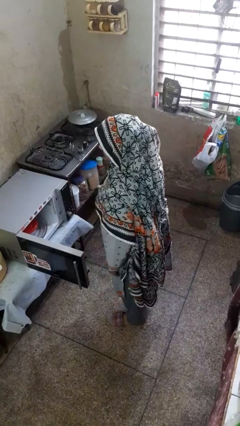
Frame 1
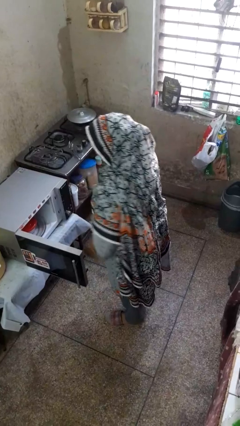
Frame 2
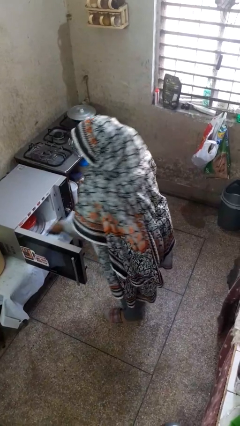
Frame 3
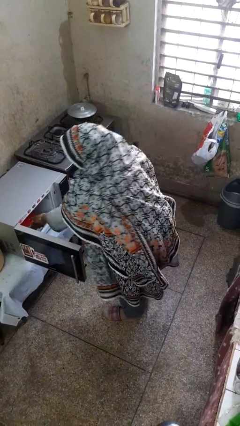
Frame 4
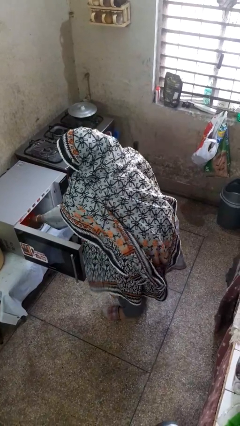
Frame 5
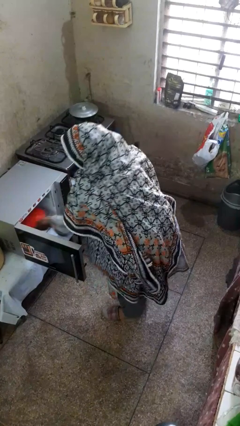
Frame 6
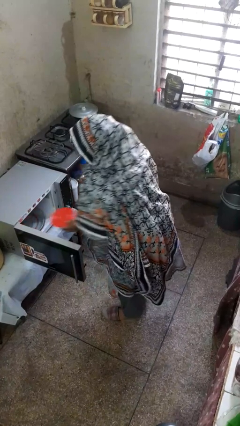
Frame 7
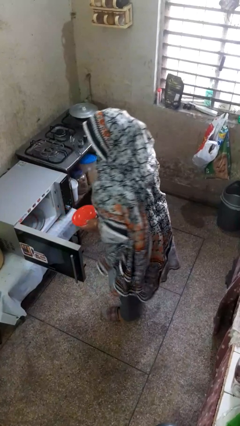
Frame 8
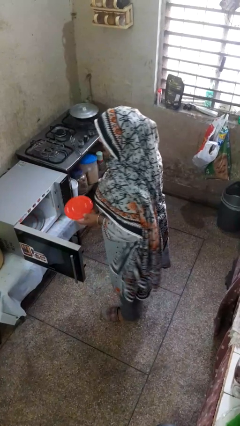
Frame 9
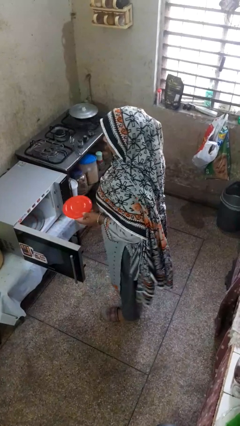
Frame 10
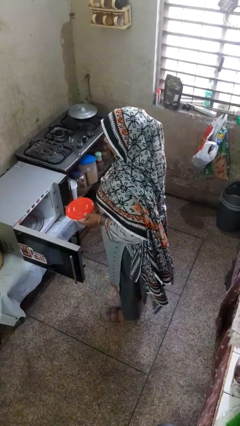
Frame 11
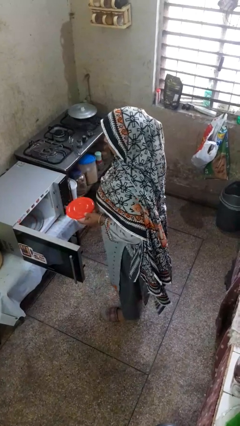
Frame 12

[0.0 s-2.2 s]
person takes object from microwave

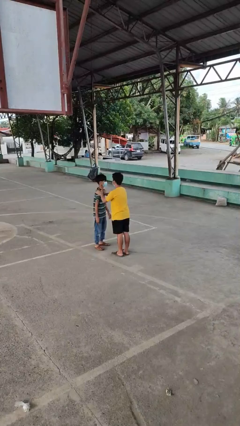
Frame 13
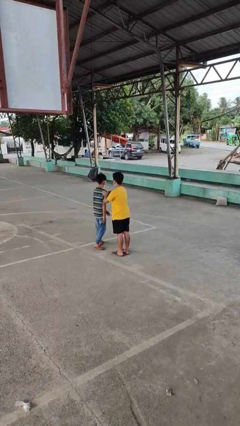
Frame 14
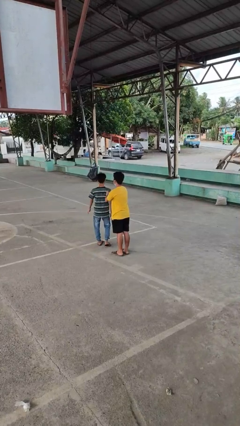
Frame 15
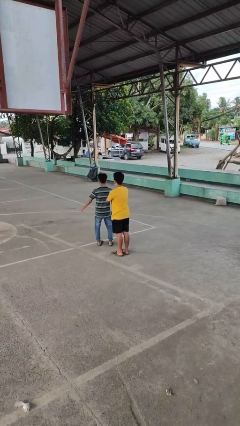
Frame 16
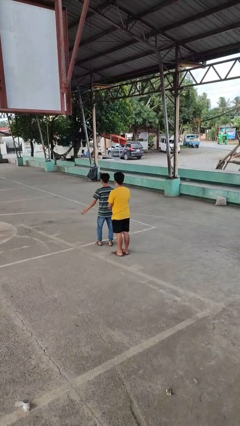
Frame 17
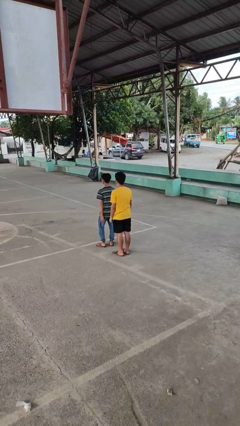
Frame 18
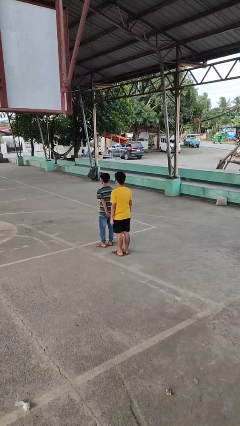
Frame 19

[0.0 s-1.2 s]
person spins person around

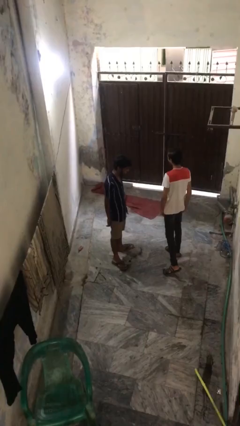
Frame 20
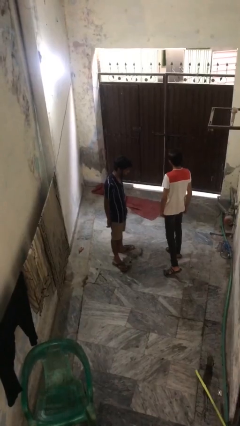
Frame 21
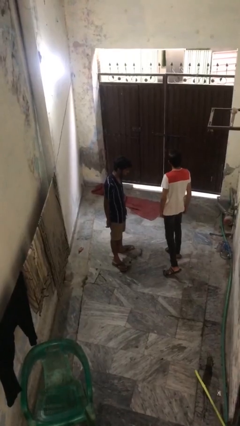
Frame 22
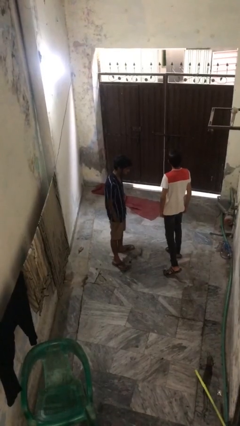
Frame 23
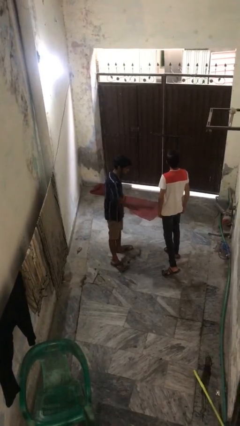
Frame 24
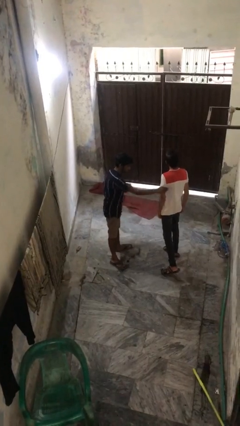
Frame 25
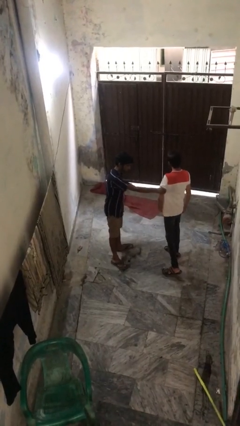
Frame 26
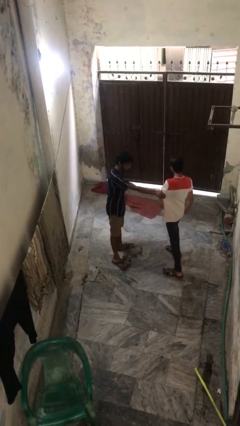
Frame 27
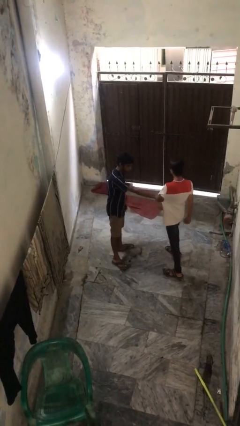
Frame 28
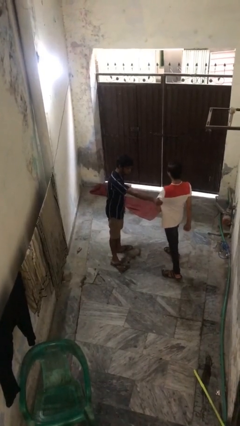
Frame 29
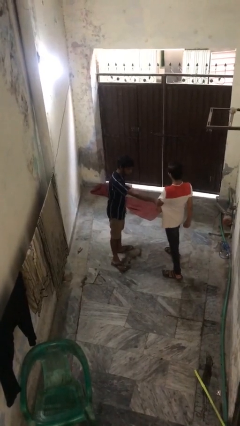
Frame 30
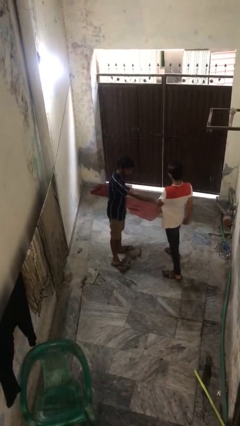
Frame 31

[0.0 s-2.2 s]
person grabs person by bicep

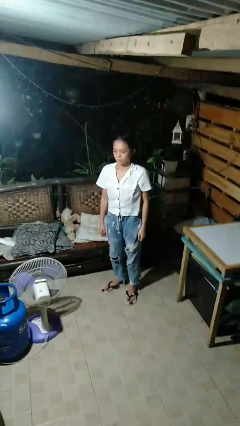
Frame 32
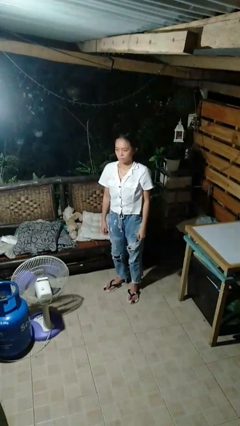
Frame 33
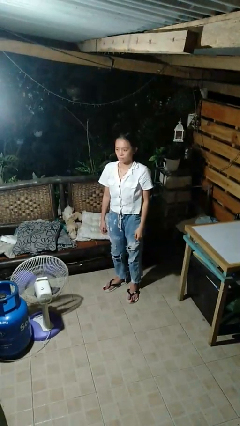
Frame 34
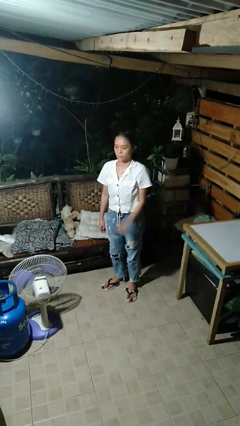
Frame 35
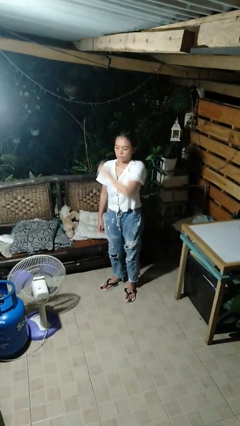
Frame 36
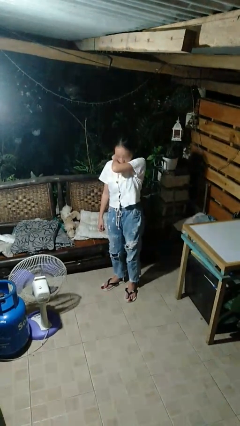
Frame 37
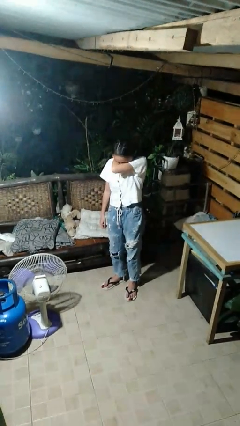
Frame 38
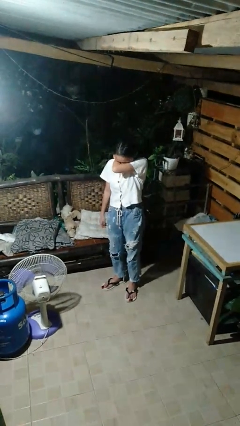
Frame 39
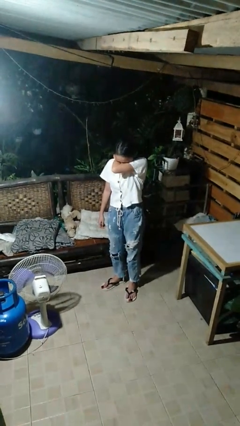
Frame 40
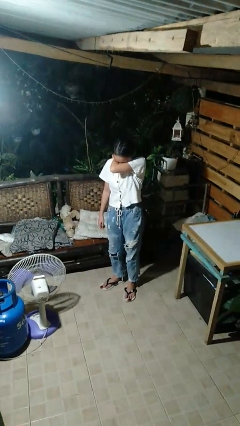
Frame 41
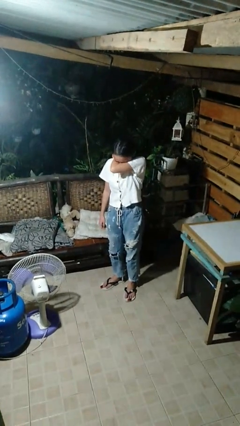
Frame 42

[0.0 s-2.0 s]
person sneezes into arm

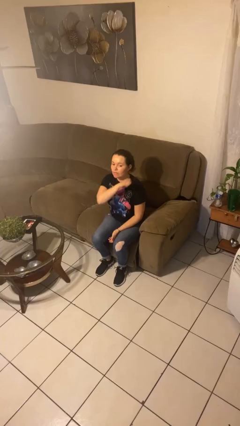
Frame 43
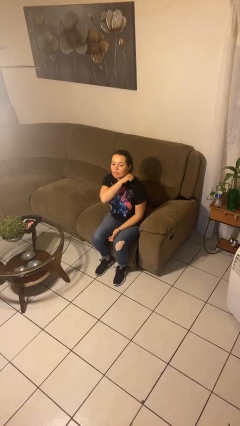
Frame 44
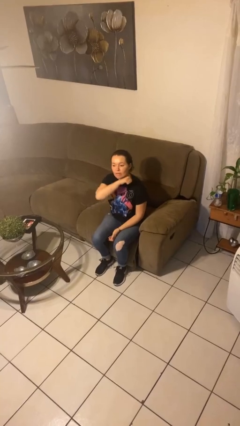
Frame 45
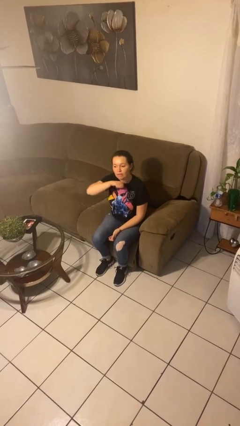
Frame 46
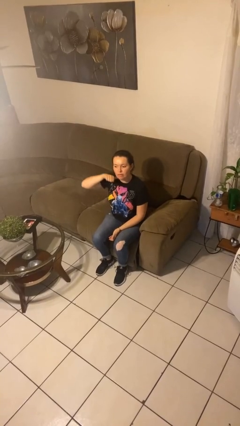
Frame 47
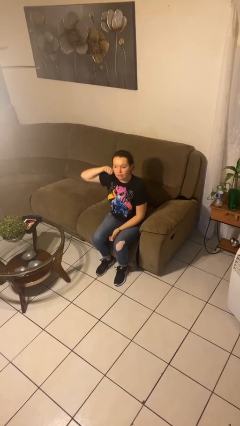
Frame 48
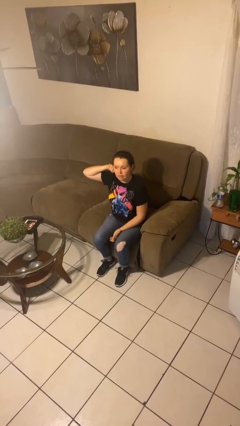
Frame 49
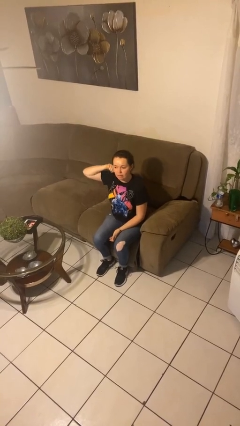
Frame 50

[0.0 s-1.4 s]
person gestures cut

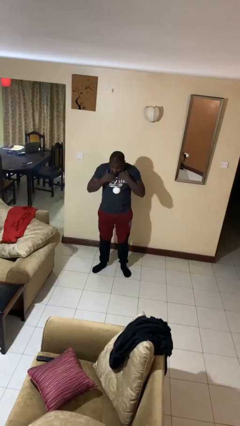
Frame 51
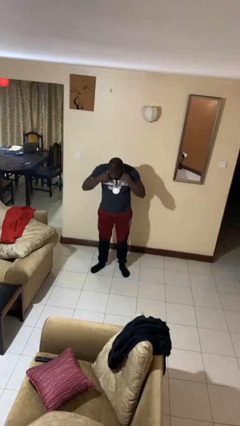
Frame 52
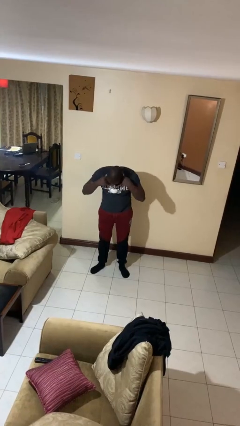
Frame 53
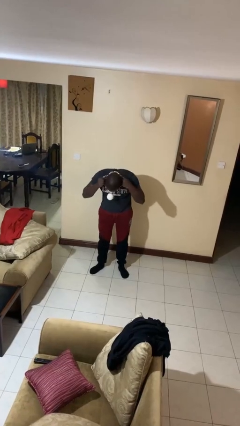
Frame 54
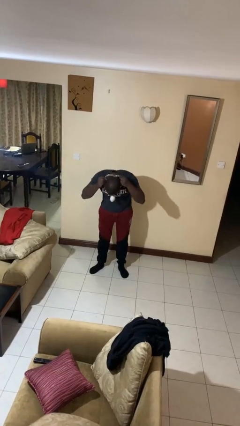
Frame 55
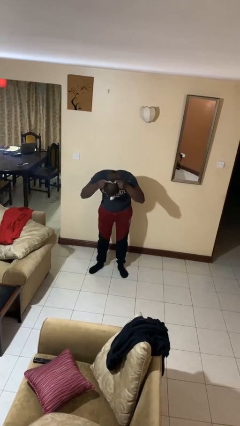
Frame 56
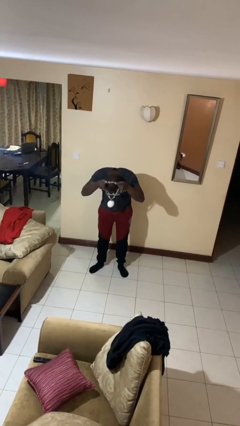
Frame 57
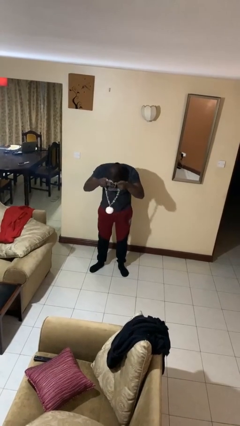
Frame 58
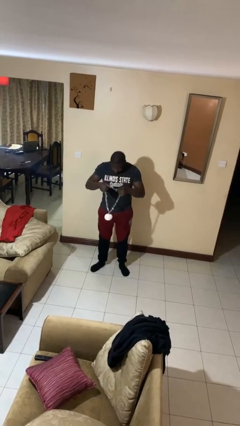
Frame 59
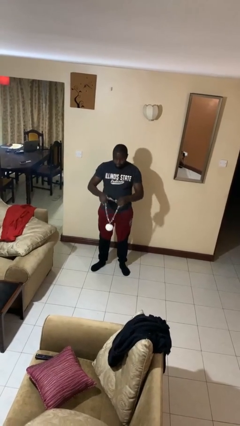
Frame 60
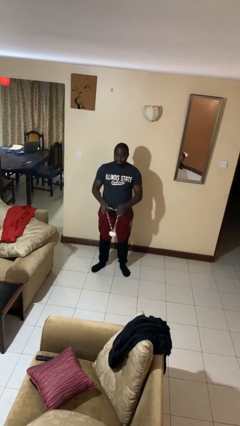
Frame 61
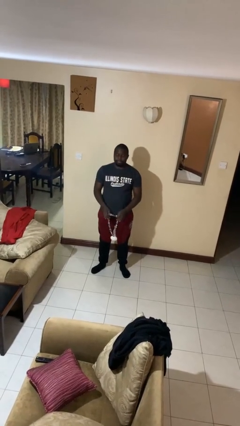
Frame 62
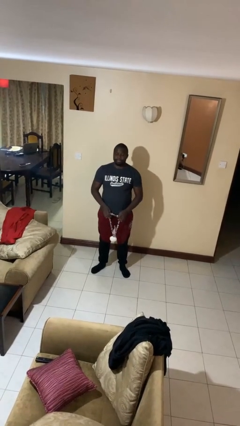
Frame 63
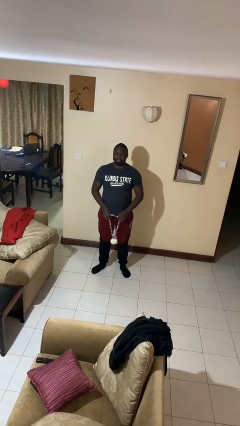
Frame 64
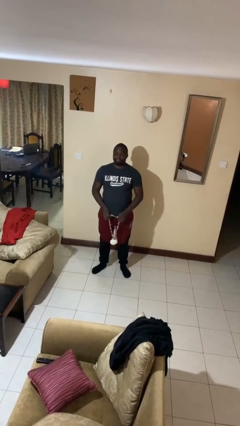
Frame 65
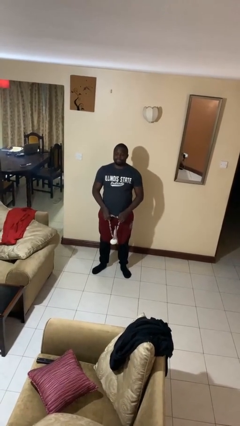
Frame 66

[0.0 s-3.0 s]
person takes off necklace

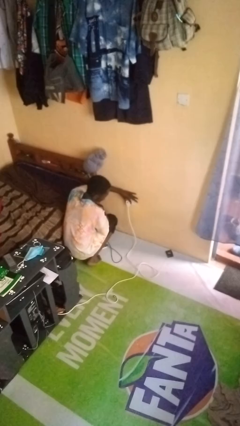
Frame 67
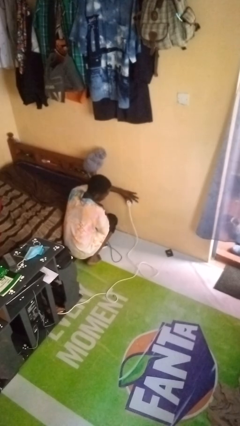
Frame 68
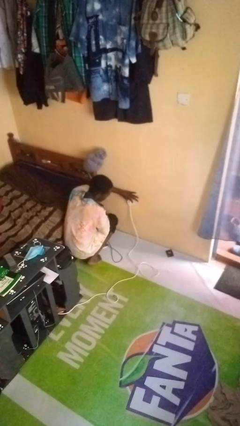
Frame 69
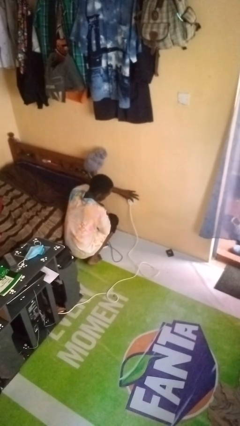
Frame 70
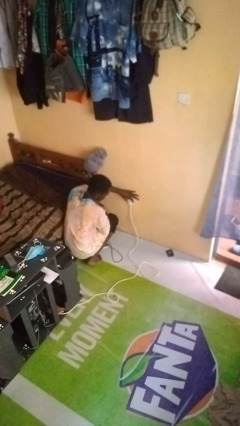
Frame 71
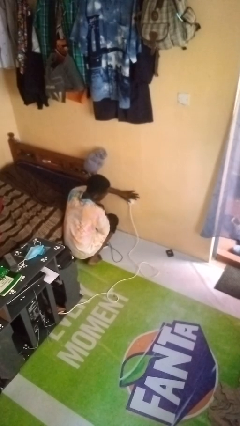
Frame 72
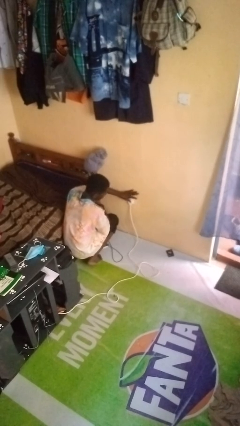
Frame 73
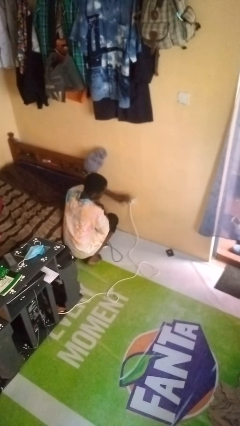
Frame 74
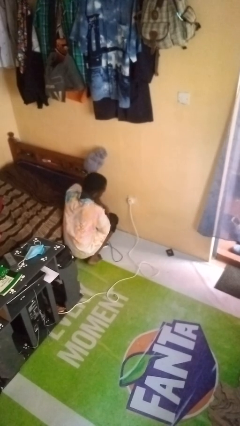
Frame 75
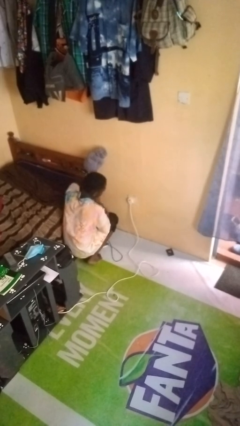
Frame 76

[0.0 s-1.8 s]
person plugs into electrical socket

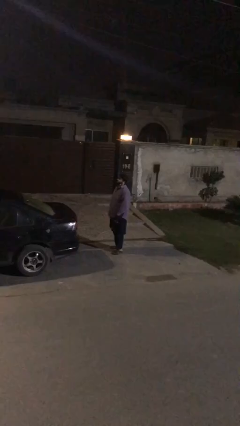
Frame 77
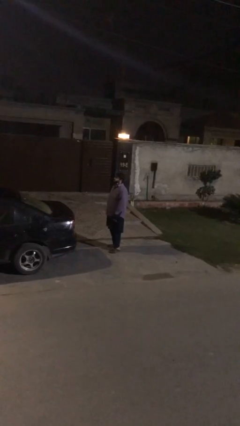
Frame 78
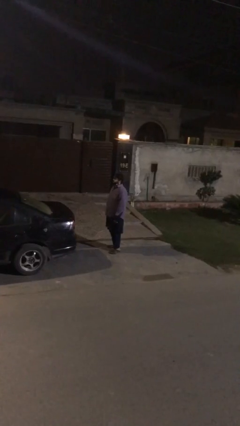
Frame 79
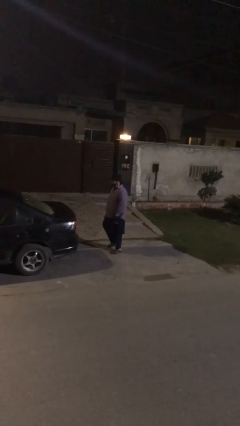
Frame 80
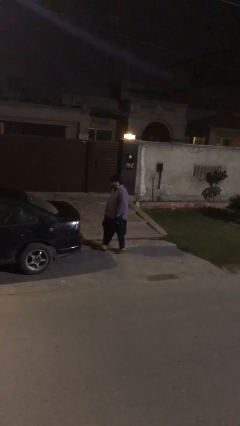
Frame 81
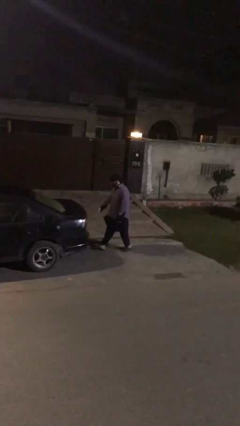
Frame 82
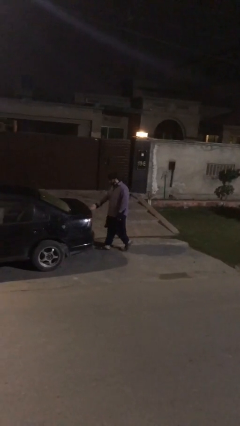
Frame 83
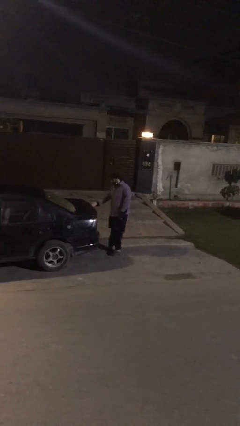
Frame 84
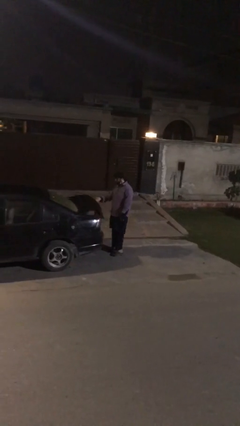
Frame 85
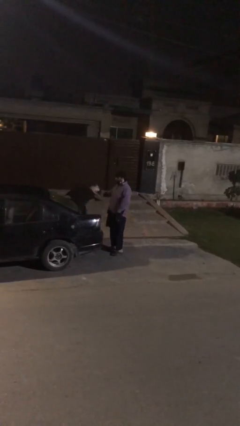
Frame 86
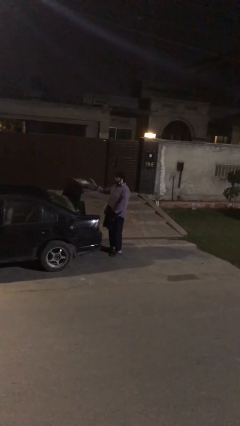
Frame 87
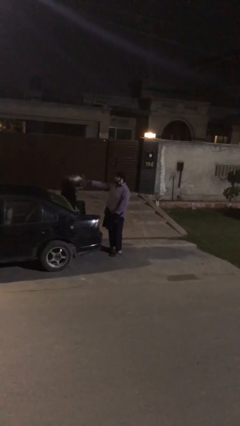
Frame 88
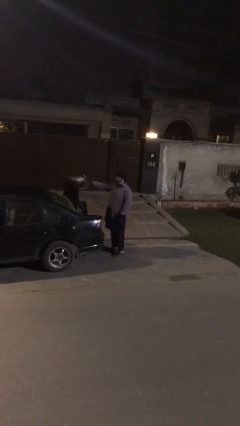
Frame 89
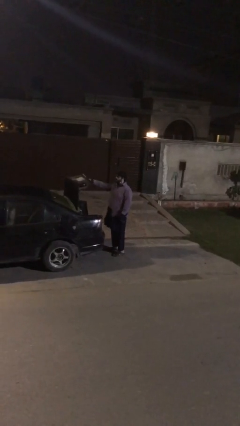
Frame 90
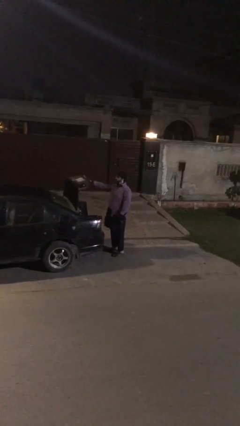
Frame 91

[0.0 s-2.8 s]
person opens car trunk
